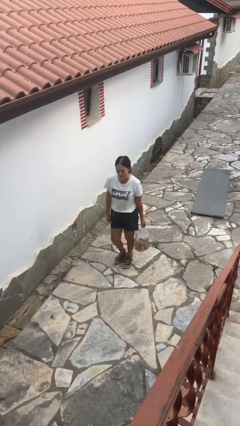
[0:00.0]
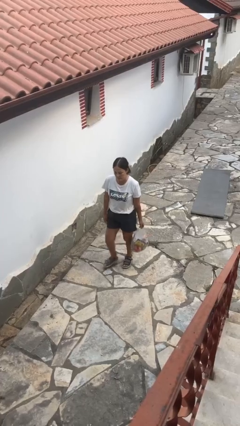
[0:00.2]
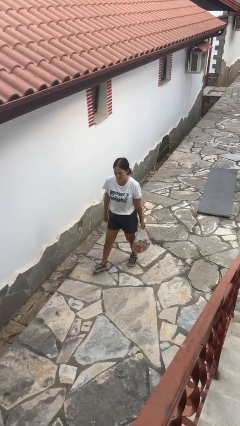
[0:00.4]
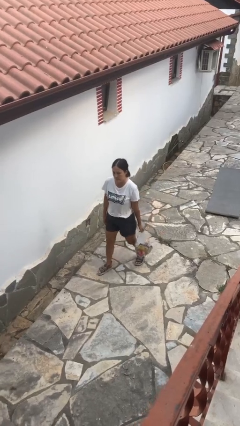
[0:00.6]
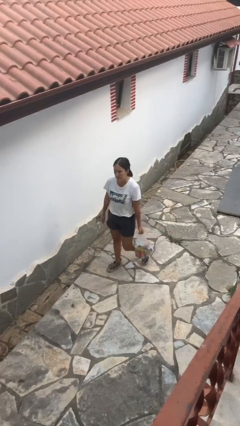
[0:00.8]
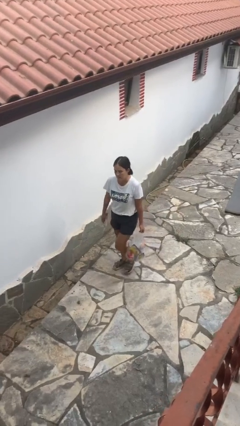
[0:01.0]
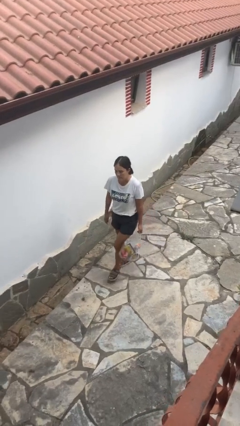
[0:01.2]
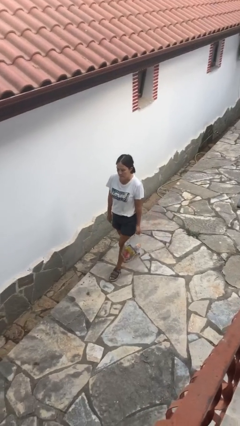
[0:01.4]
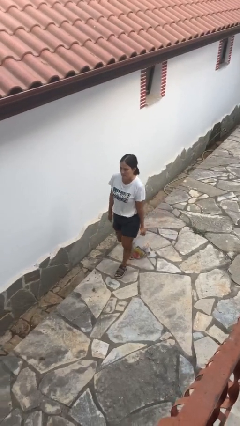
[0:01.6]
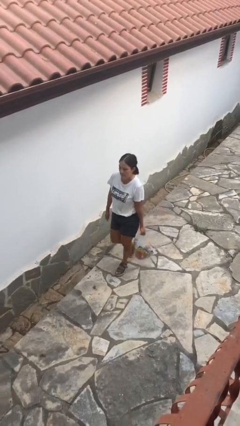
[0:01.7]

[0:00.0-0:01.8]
person carries groceries

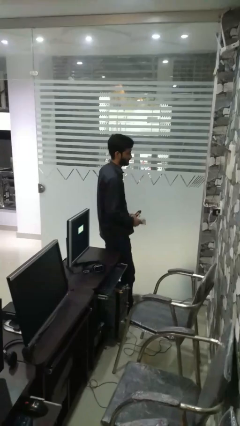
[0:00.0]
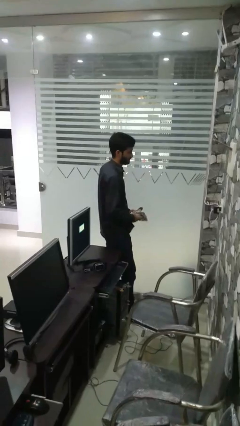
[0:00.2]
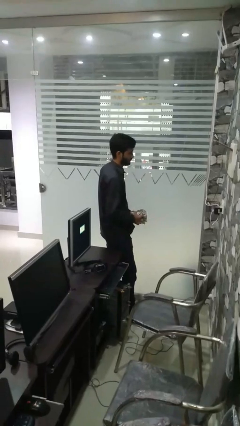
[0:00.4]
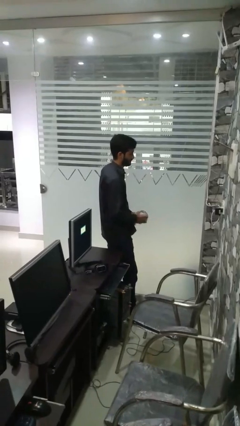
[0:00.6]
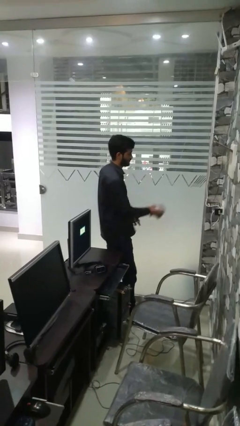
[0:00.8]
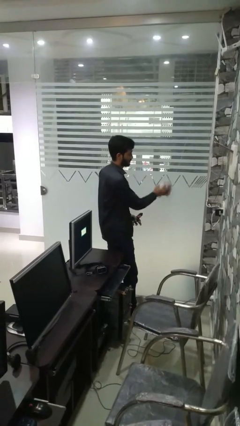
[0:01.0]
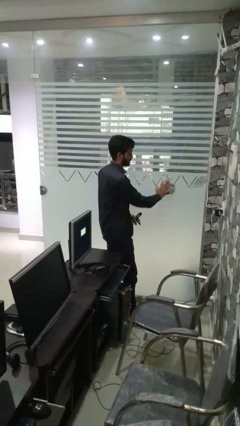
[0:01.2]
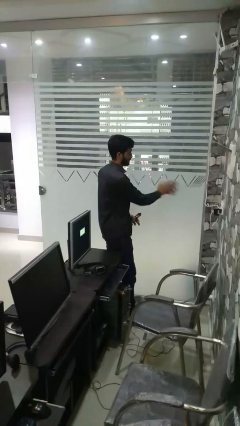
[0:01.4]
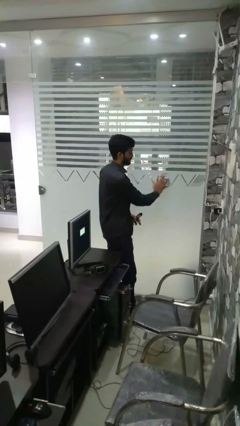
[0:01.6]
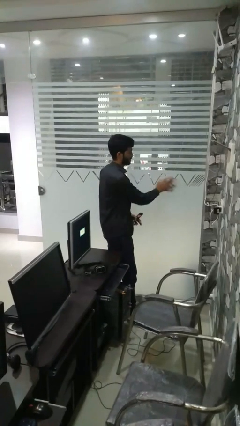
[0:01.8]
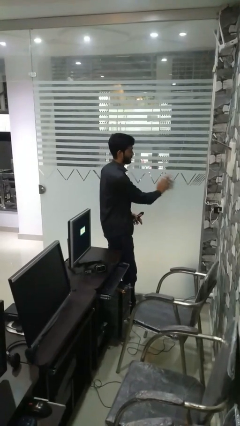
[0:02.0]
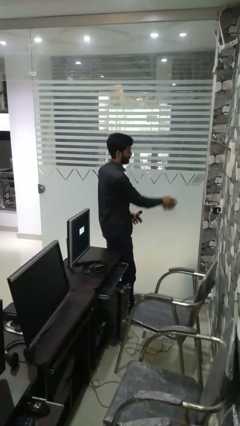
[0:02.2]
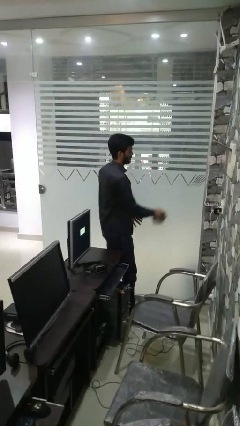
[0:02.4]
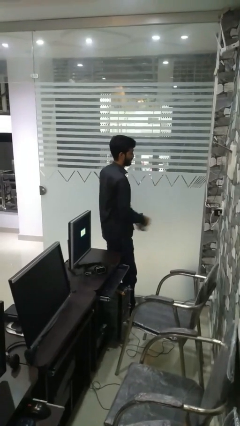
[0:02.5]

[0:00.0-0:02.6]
person washes window

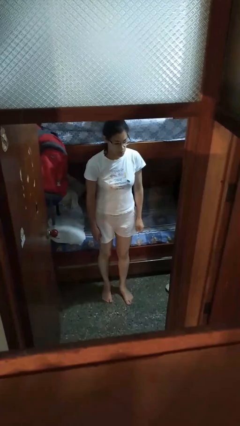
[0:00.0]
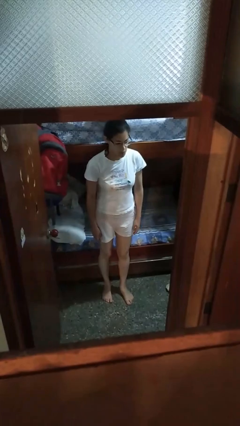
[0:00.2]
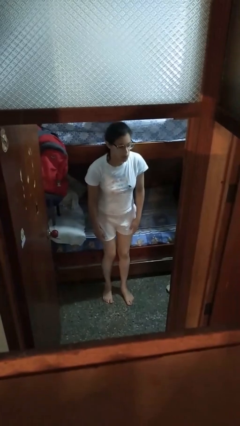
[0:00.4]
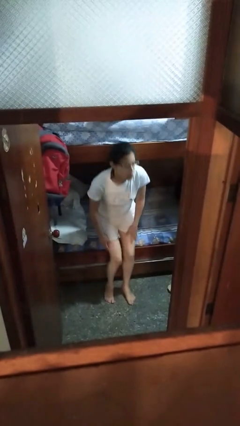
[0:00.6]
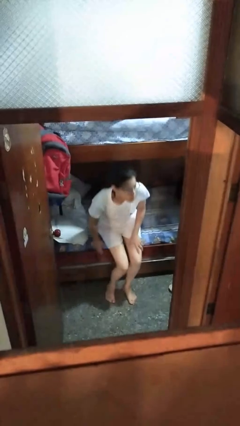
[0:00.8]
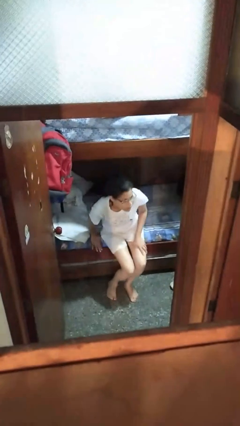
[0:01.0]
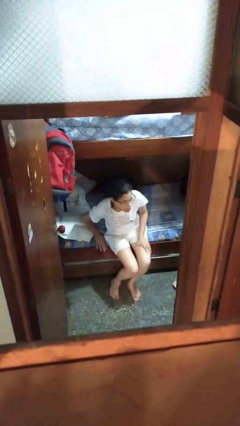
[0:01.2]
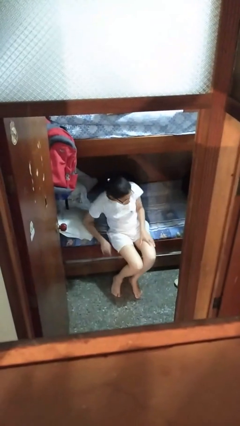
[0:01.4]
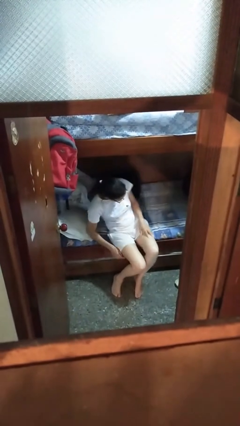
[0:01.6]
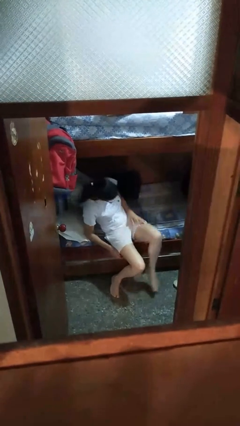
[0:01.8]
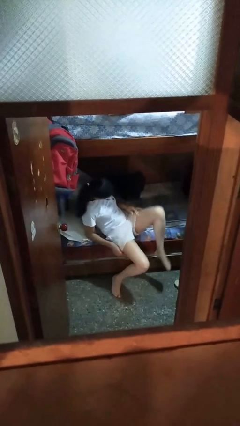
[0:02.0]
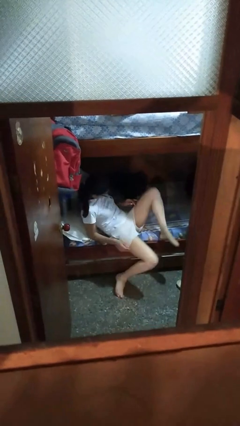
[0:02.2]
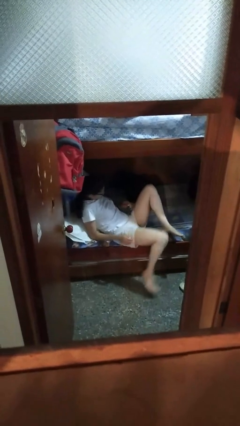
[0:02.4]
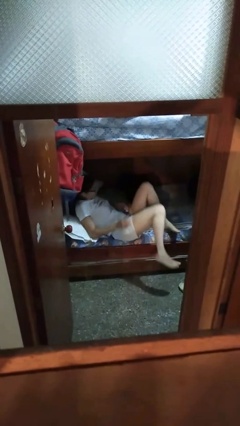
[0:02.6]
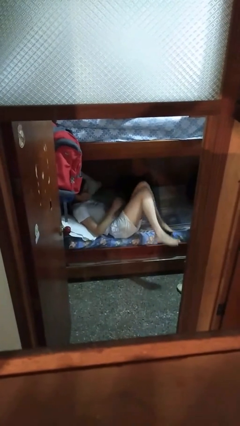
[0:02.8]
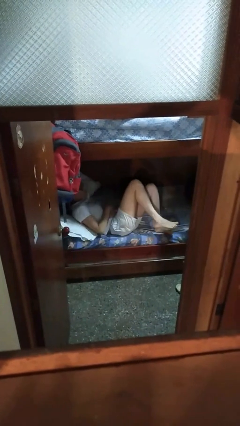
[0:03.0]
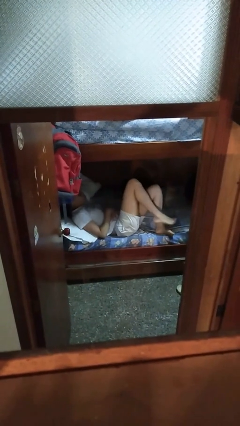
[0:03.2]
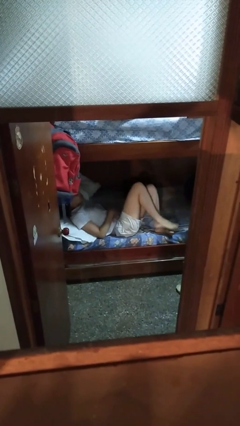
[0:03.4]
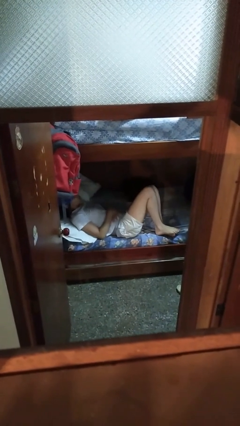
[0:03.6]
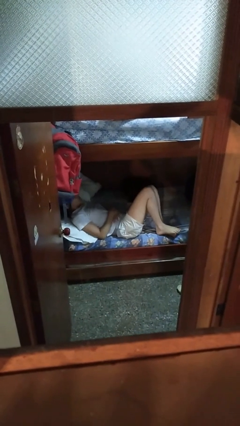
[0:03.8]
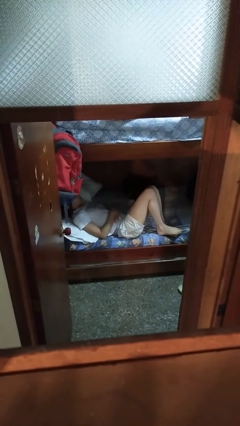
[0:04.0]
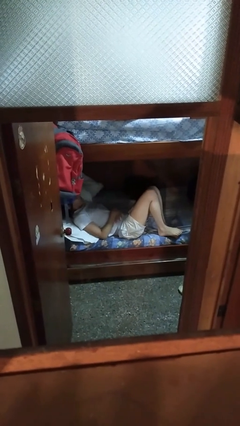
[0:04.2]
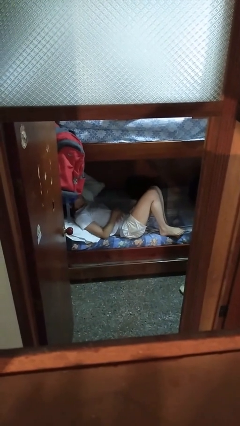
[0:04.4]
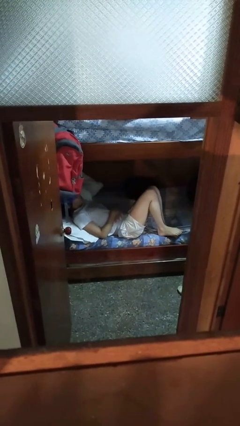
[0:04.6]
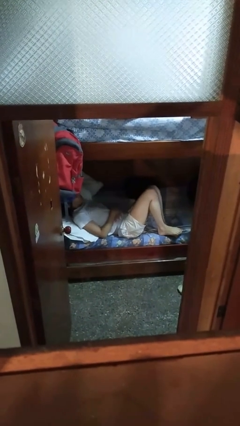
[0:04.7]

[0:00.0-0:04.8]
person lies down on bed

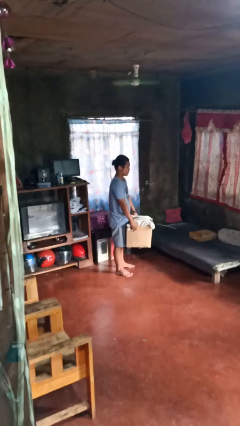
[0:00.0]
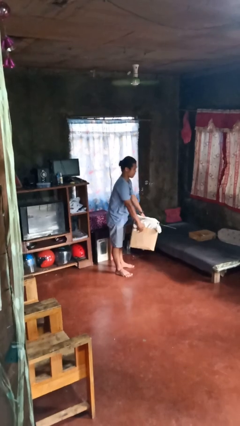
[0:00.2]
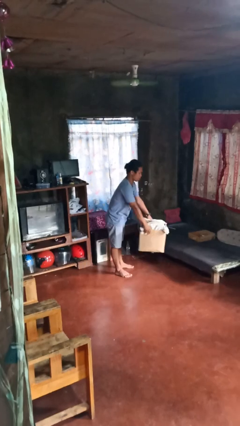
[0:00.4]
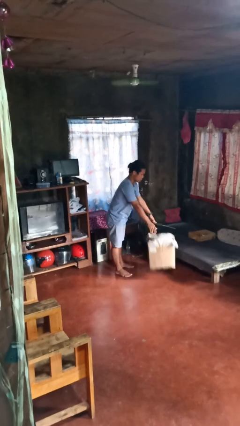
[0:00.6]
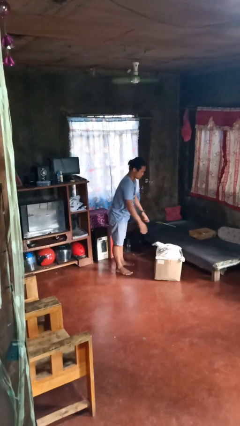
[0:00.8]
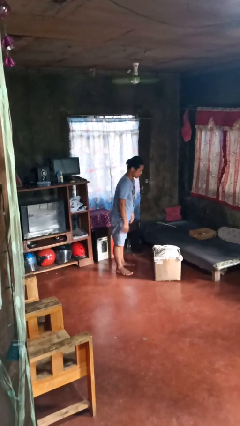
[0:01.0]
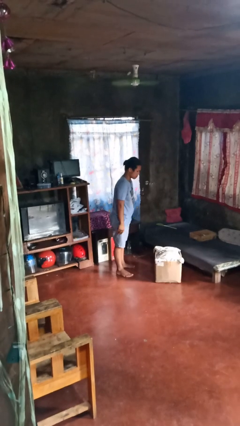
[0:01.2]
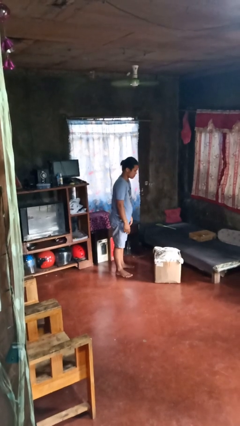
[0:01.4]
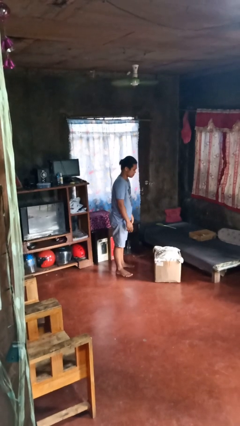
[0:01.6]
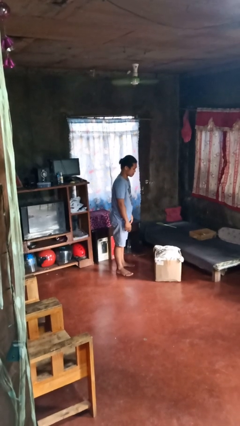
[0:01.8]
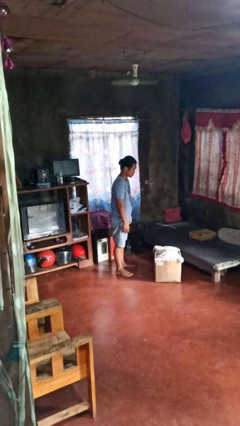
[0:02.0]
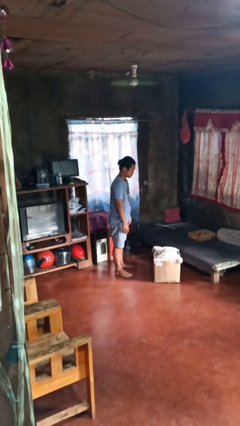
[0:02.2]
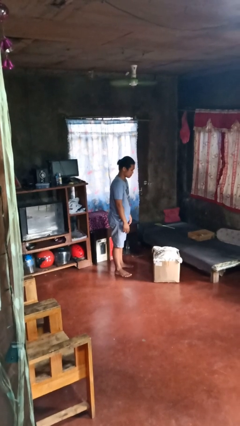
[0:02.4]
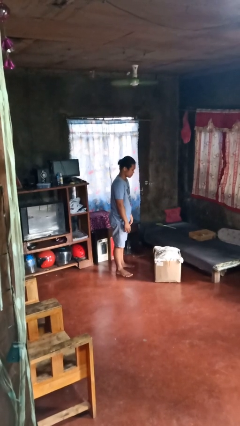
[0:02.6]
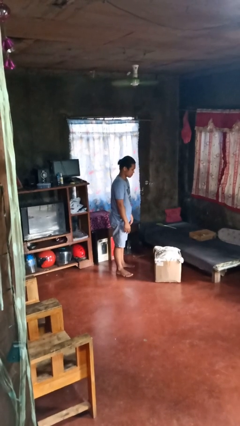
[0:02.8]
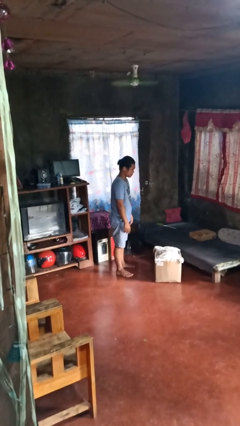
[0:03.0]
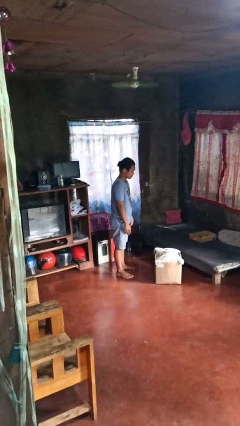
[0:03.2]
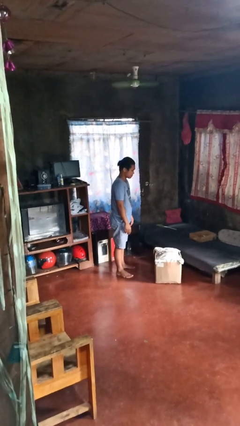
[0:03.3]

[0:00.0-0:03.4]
person unloads box onto floor

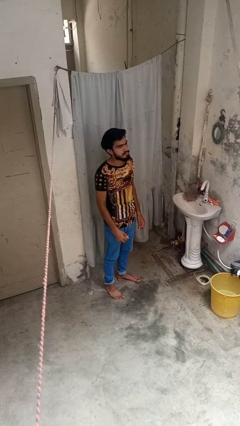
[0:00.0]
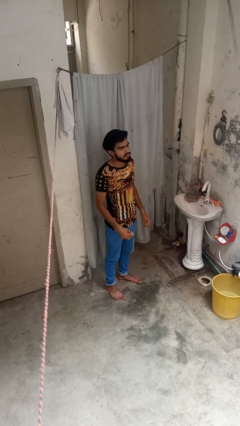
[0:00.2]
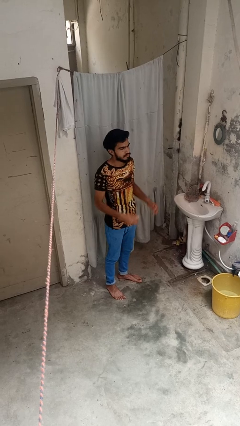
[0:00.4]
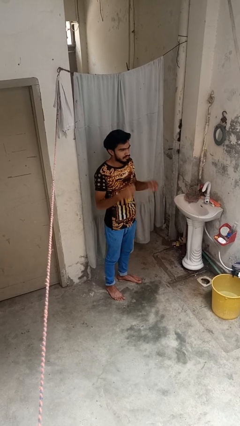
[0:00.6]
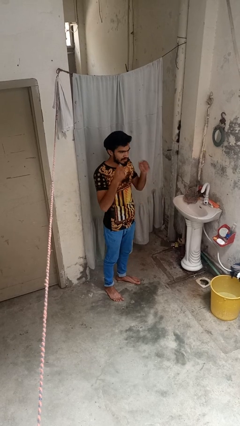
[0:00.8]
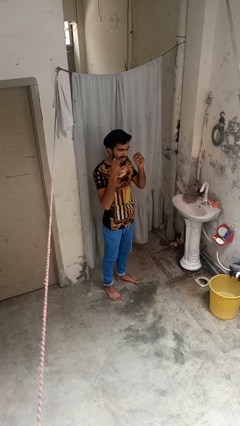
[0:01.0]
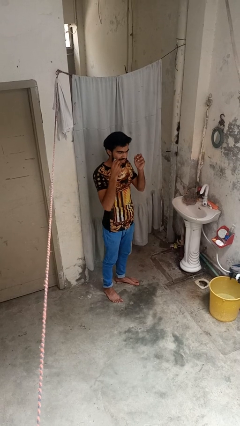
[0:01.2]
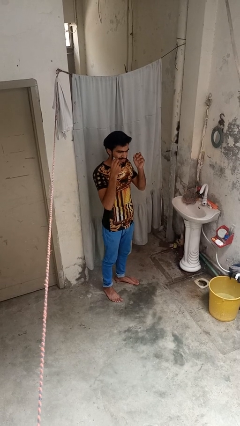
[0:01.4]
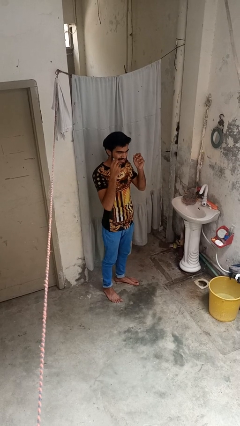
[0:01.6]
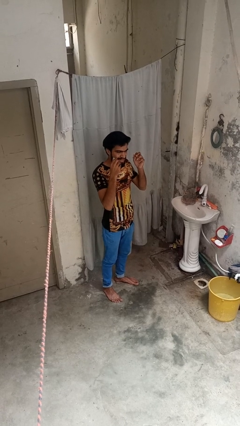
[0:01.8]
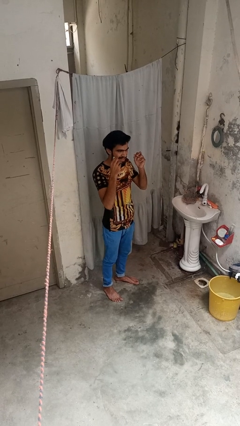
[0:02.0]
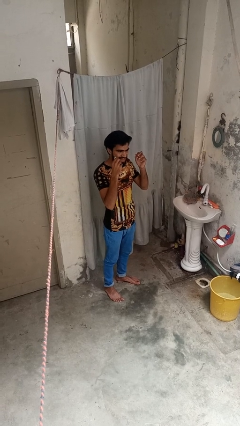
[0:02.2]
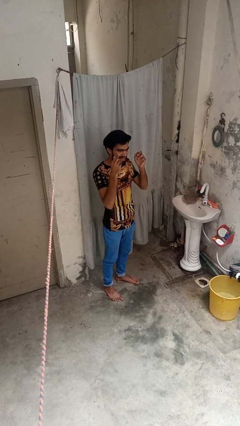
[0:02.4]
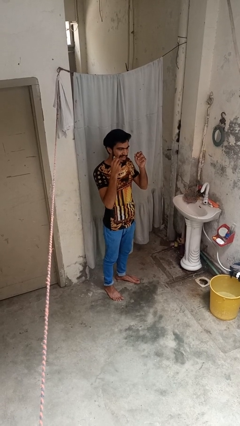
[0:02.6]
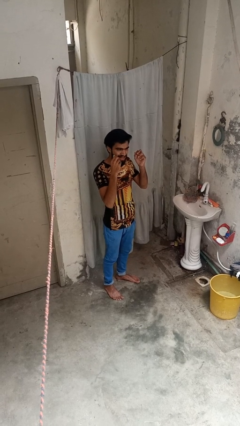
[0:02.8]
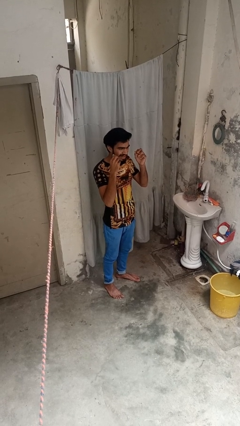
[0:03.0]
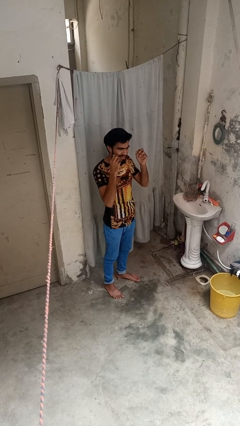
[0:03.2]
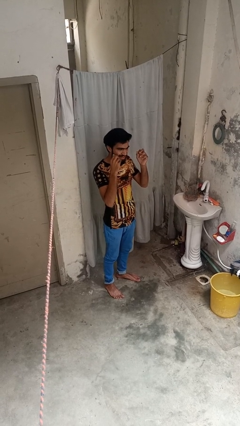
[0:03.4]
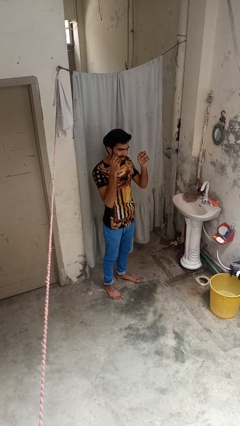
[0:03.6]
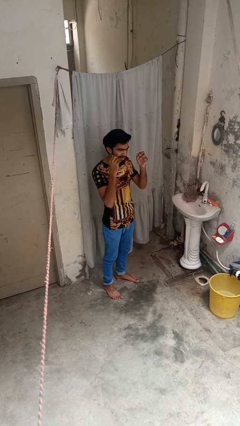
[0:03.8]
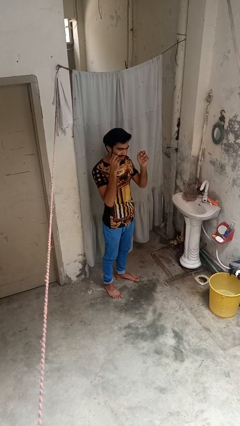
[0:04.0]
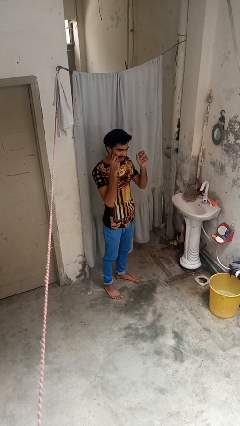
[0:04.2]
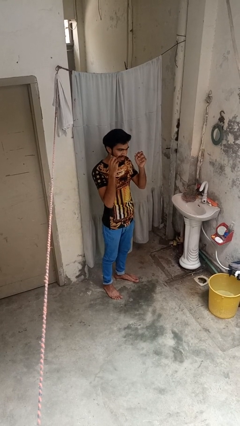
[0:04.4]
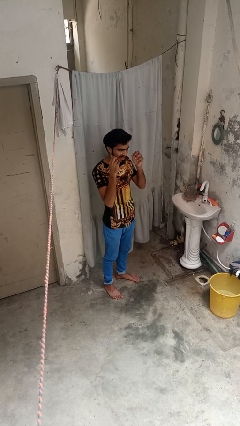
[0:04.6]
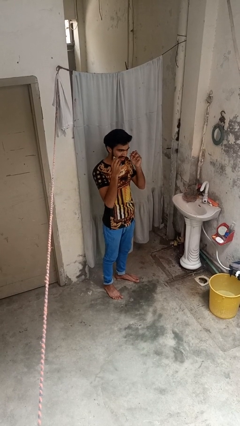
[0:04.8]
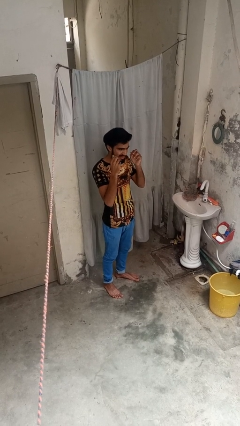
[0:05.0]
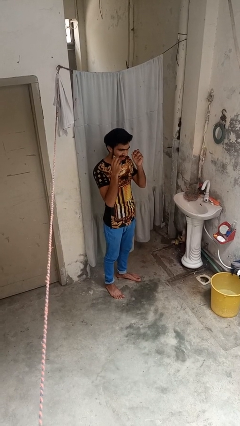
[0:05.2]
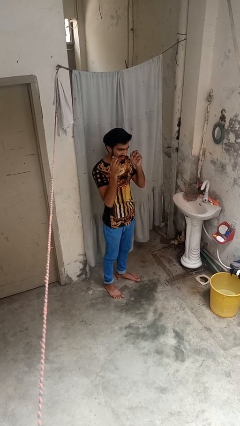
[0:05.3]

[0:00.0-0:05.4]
person flosses
